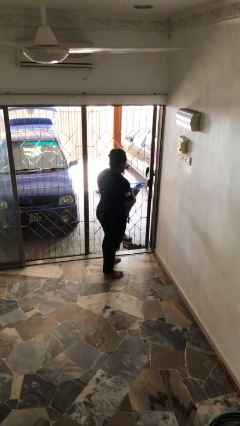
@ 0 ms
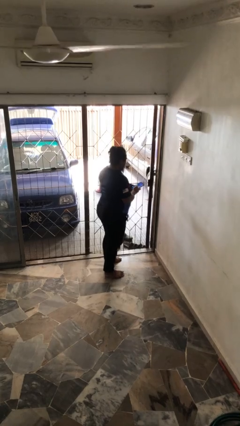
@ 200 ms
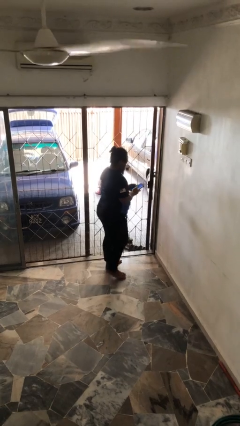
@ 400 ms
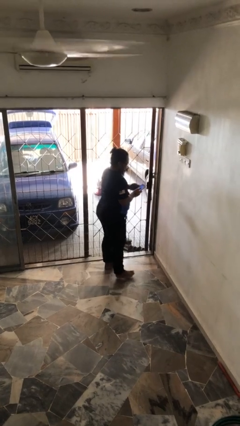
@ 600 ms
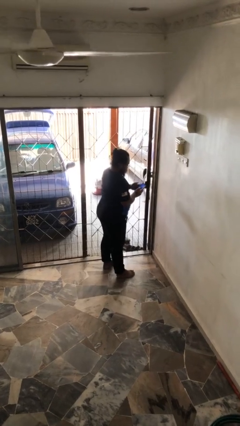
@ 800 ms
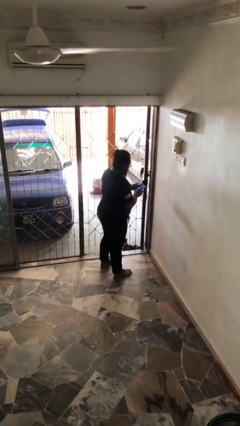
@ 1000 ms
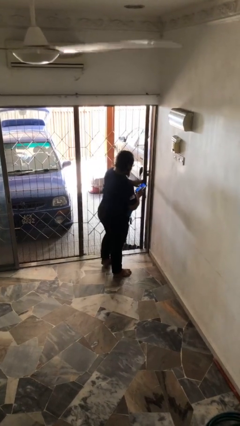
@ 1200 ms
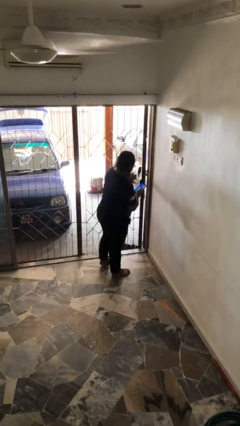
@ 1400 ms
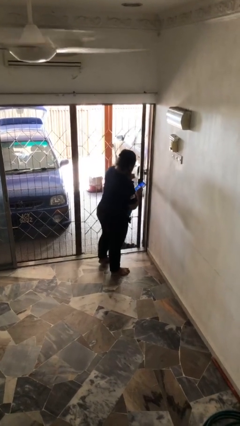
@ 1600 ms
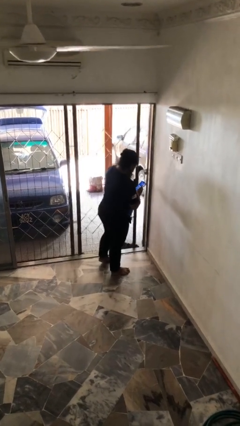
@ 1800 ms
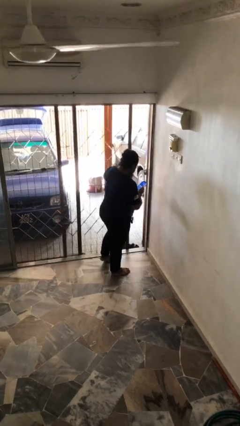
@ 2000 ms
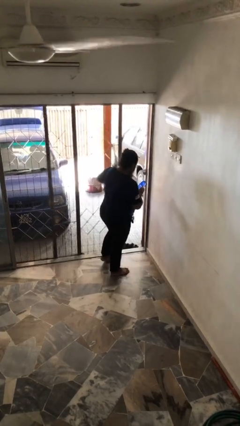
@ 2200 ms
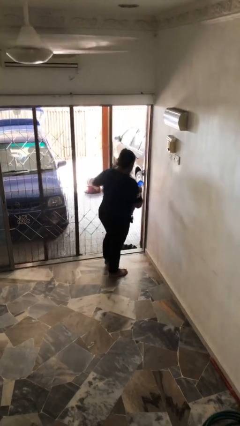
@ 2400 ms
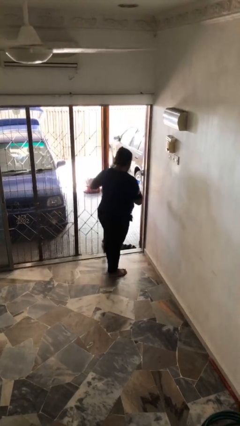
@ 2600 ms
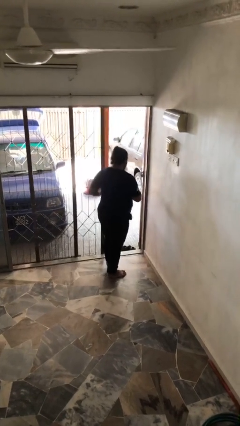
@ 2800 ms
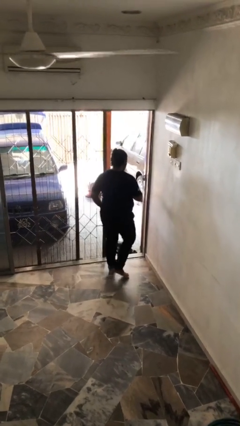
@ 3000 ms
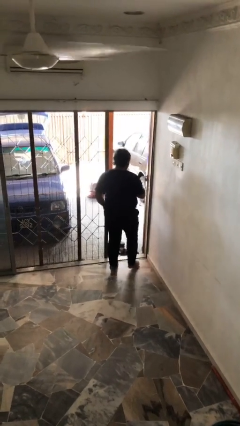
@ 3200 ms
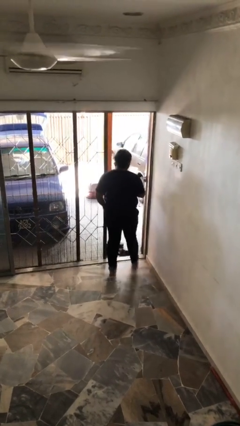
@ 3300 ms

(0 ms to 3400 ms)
person opens facility door

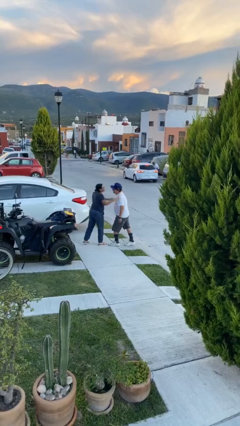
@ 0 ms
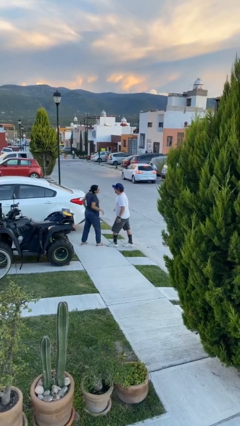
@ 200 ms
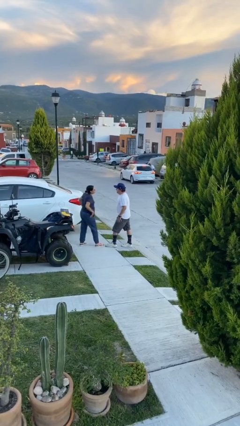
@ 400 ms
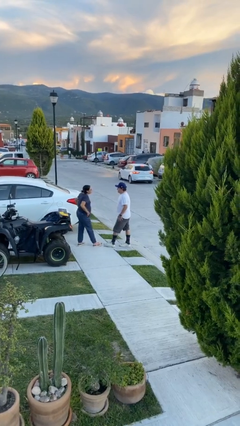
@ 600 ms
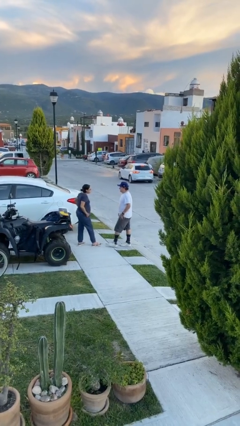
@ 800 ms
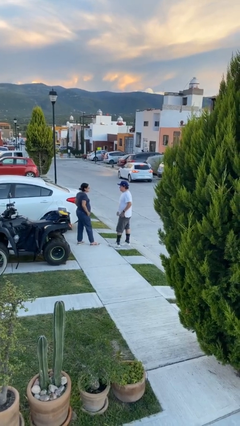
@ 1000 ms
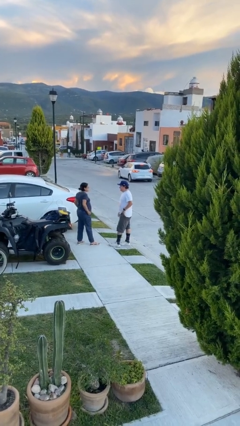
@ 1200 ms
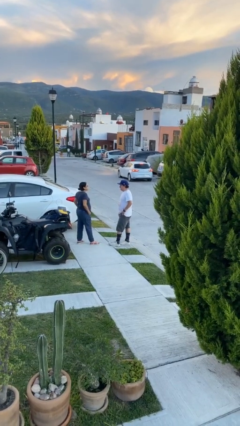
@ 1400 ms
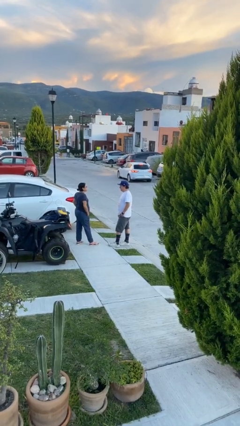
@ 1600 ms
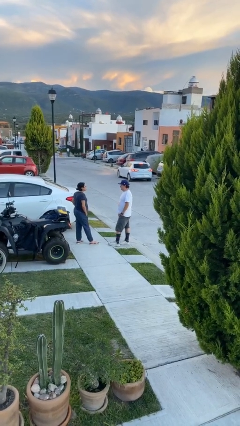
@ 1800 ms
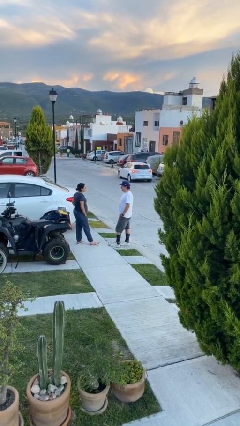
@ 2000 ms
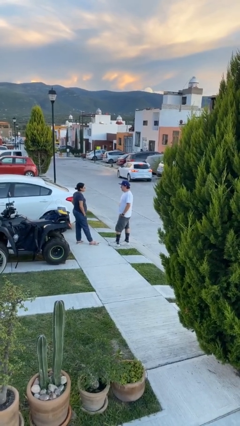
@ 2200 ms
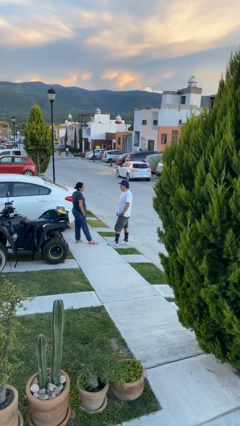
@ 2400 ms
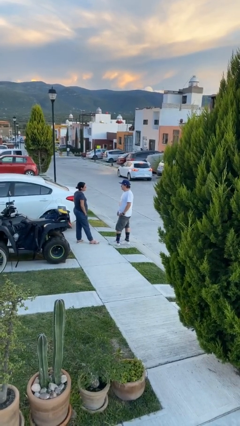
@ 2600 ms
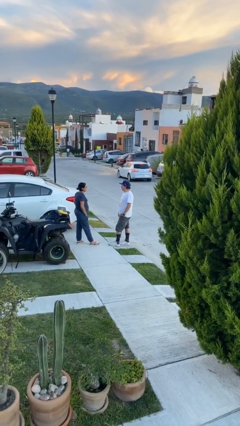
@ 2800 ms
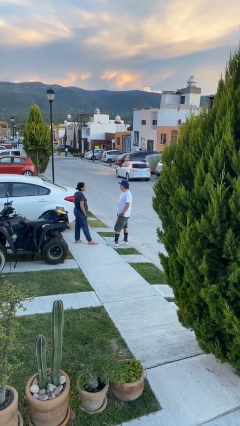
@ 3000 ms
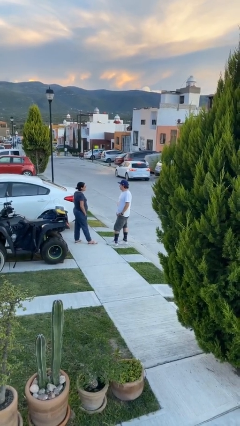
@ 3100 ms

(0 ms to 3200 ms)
person talks to person

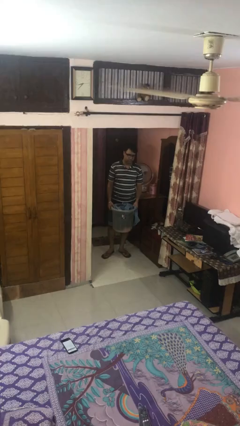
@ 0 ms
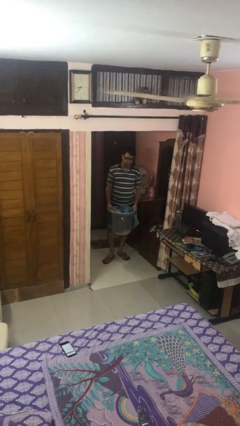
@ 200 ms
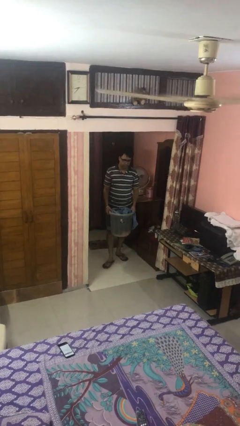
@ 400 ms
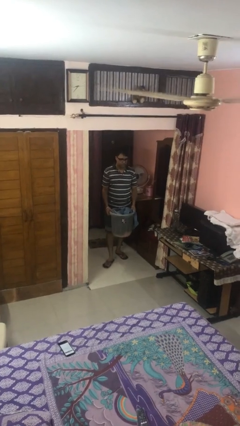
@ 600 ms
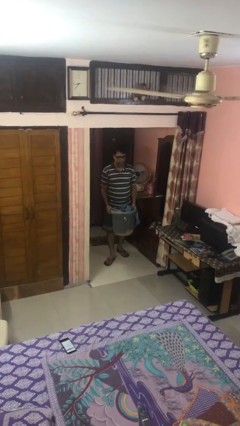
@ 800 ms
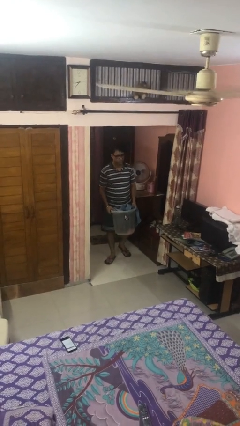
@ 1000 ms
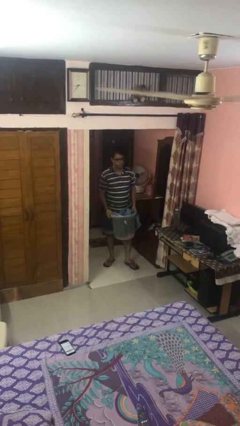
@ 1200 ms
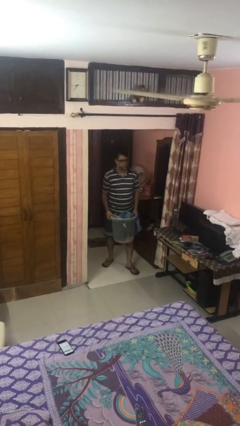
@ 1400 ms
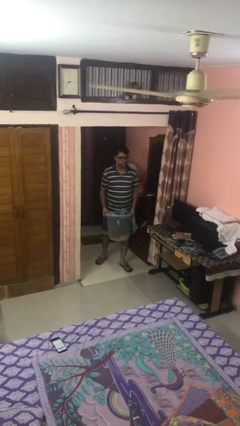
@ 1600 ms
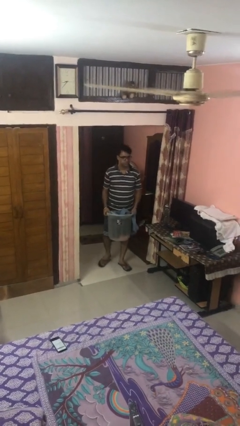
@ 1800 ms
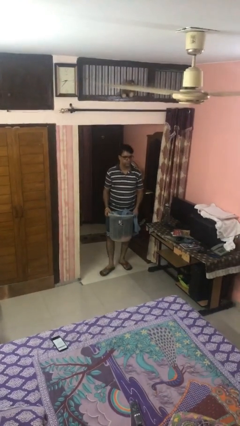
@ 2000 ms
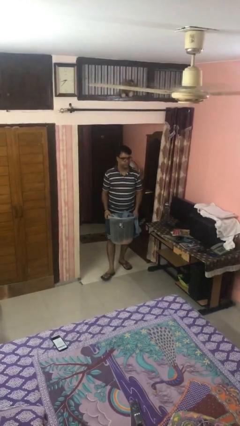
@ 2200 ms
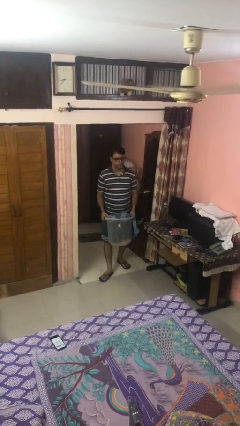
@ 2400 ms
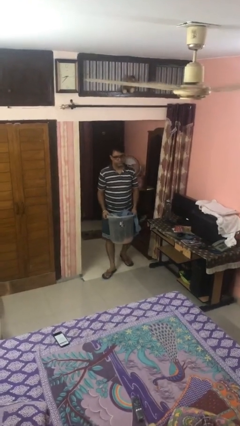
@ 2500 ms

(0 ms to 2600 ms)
person carries laundry basket

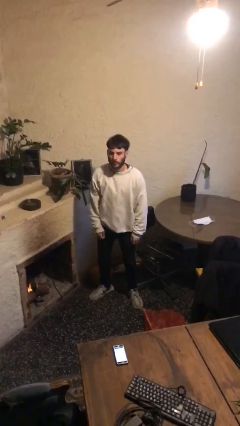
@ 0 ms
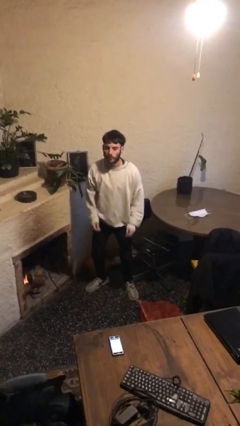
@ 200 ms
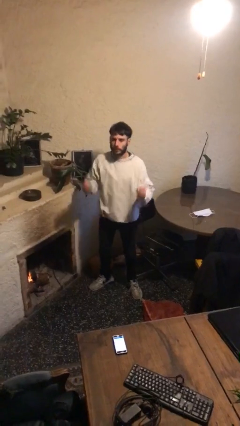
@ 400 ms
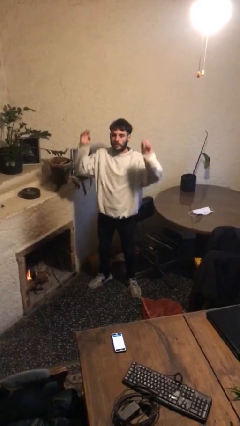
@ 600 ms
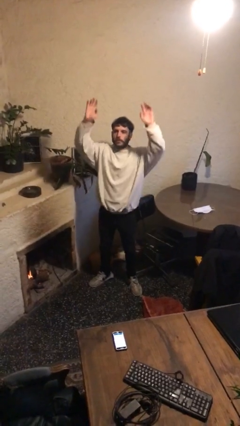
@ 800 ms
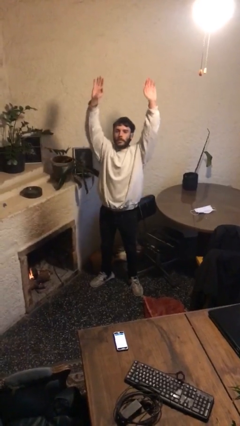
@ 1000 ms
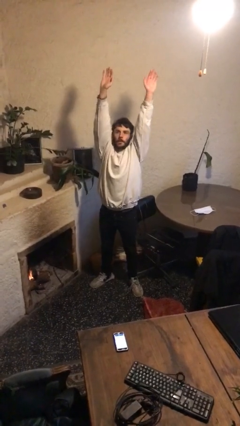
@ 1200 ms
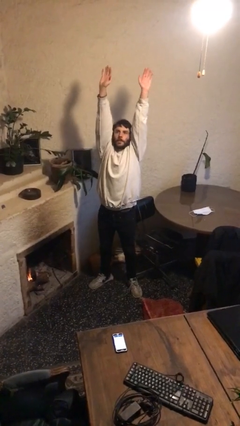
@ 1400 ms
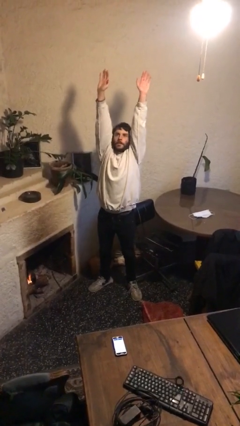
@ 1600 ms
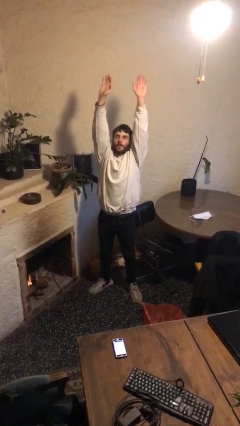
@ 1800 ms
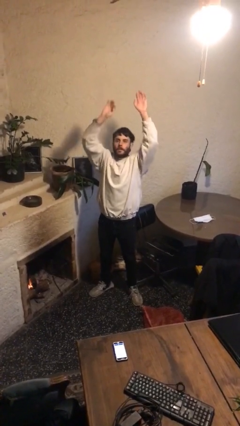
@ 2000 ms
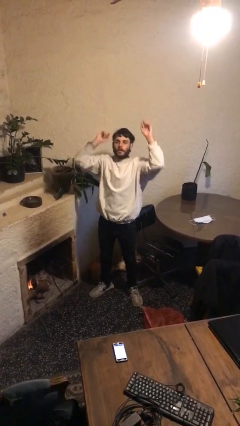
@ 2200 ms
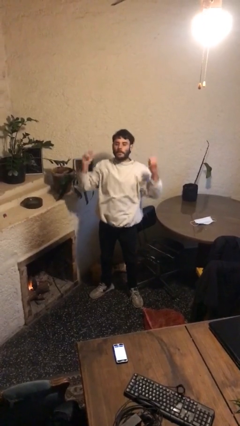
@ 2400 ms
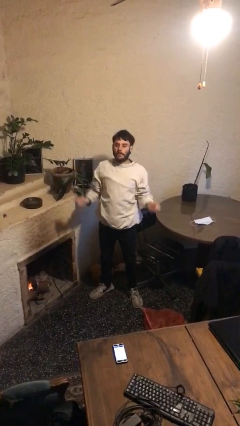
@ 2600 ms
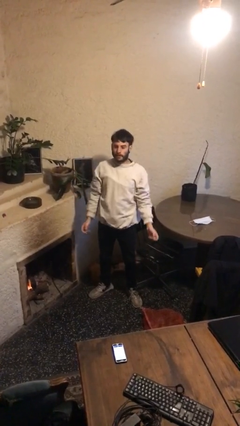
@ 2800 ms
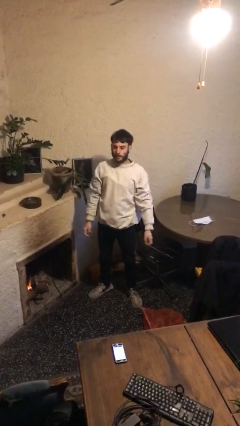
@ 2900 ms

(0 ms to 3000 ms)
person stretches arms over head

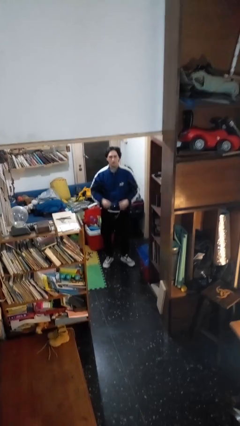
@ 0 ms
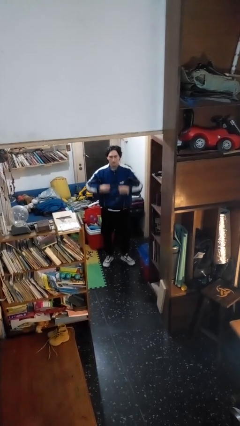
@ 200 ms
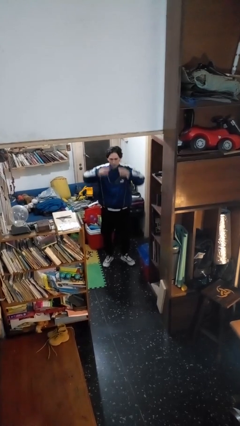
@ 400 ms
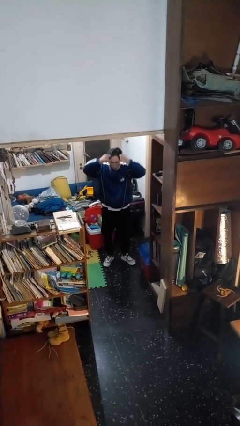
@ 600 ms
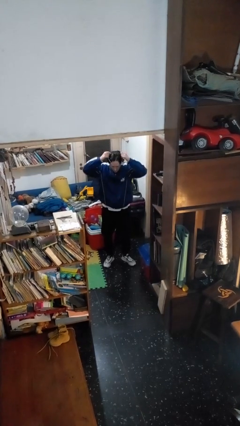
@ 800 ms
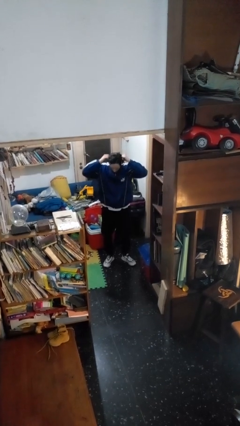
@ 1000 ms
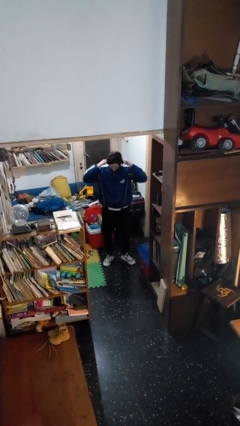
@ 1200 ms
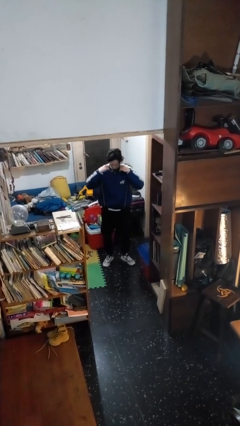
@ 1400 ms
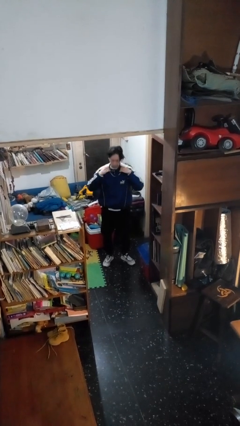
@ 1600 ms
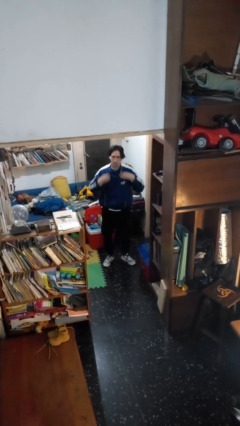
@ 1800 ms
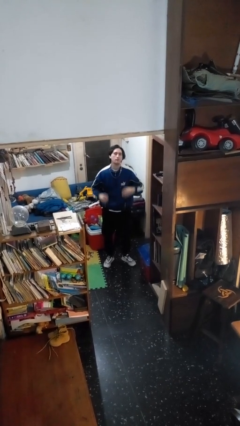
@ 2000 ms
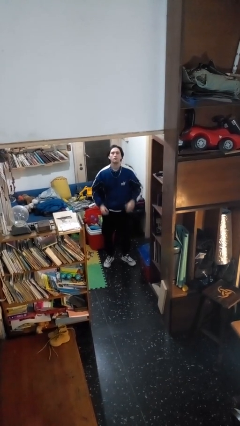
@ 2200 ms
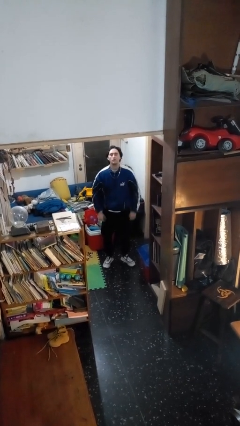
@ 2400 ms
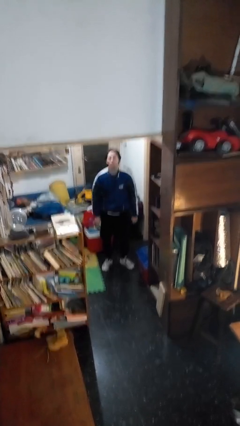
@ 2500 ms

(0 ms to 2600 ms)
person puts on necklace

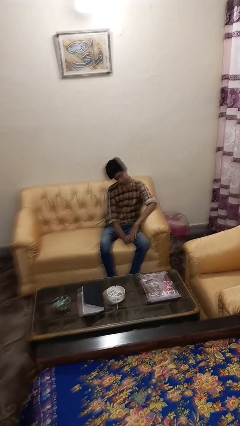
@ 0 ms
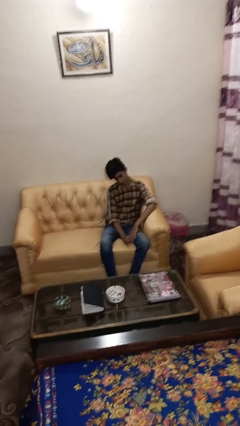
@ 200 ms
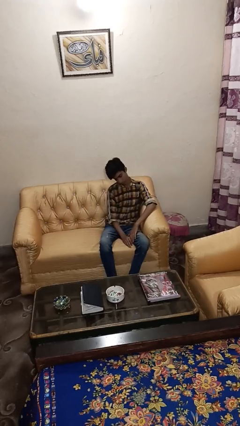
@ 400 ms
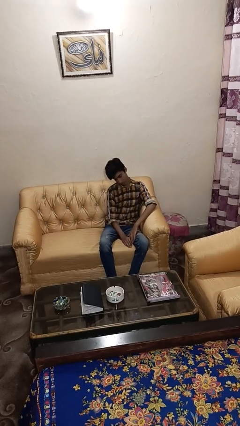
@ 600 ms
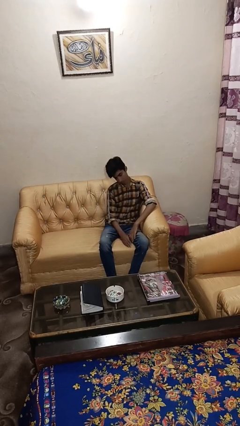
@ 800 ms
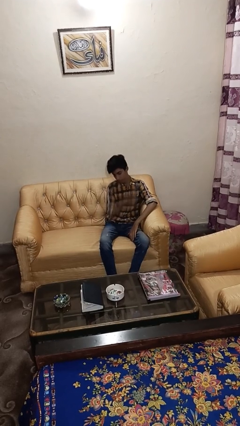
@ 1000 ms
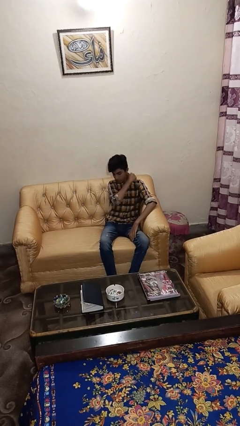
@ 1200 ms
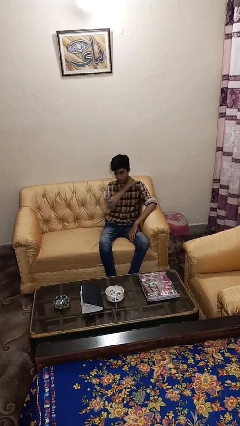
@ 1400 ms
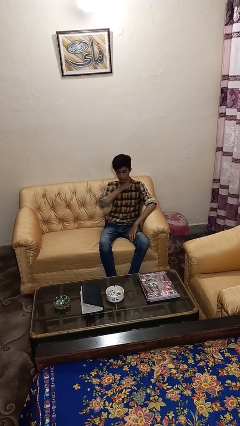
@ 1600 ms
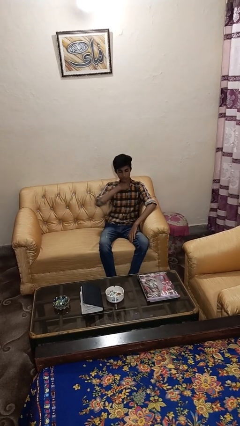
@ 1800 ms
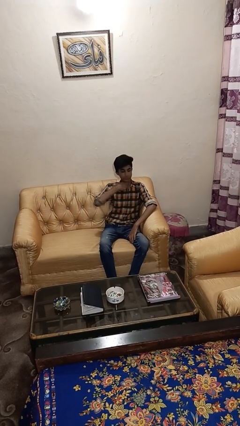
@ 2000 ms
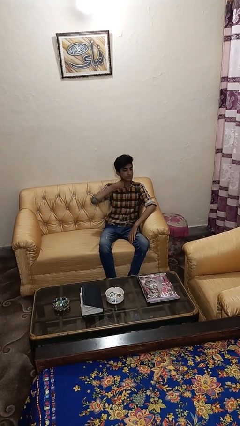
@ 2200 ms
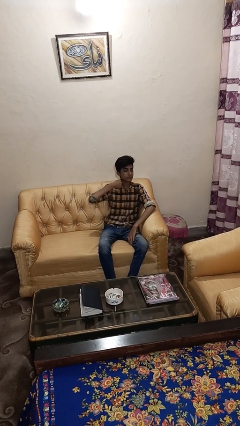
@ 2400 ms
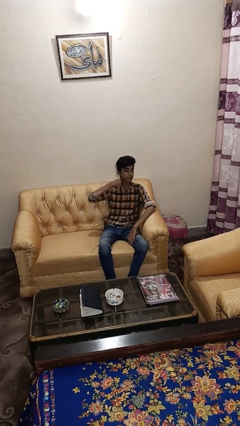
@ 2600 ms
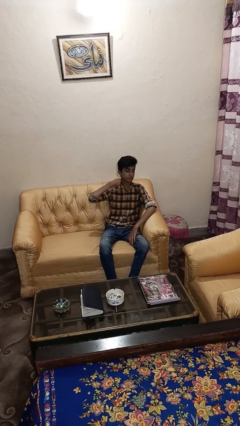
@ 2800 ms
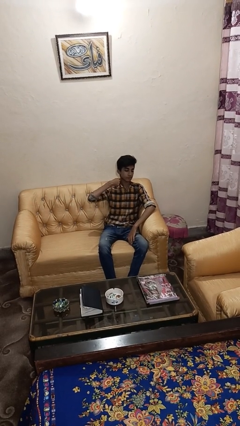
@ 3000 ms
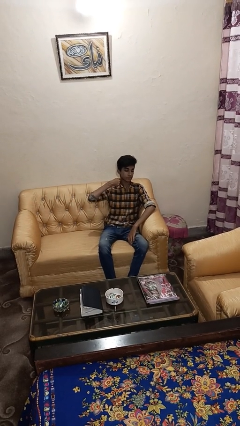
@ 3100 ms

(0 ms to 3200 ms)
person gestures cut
